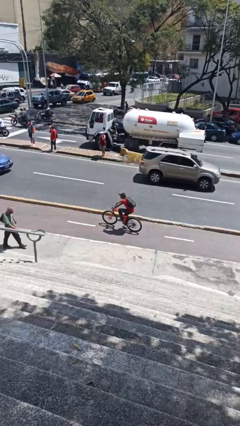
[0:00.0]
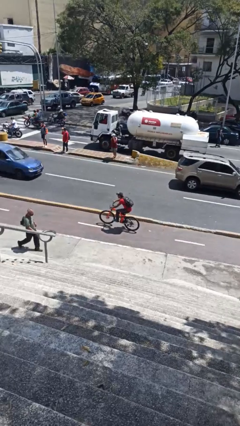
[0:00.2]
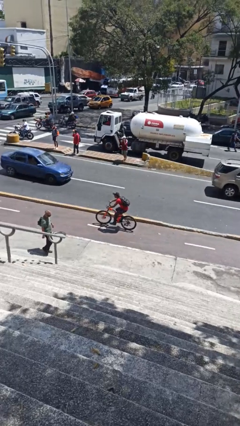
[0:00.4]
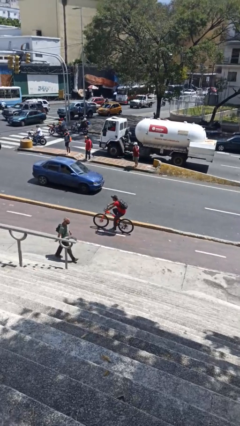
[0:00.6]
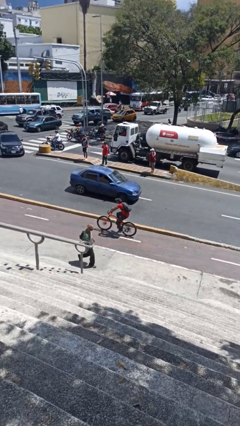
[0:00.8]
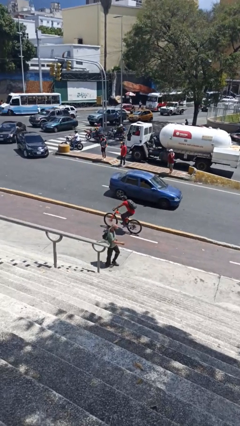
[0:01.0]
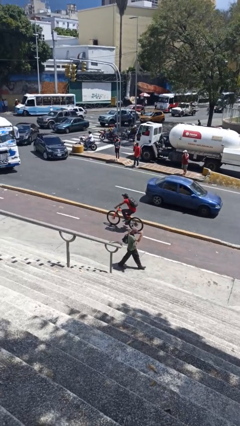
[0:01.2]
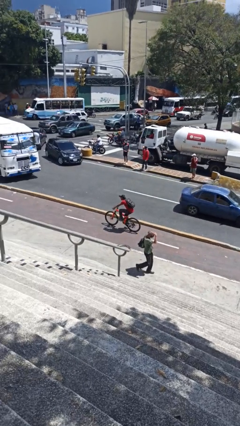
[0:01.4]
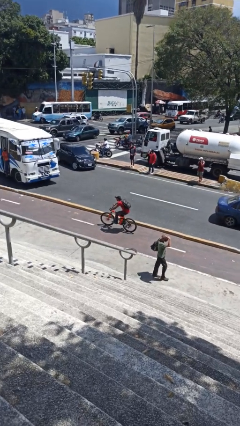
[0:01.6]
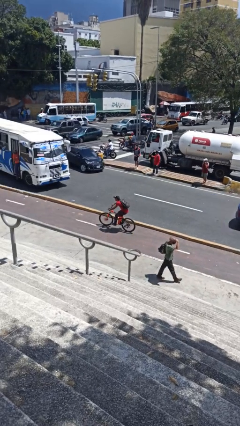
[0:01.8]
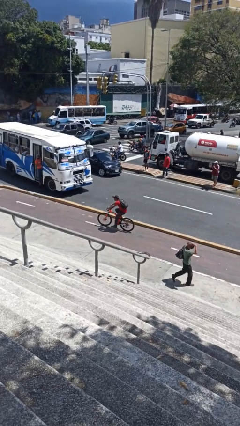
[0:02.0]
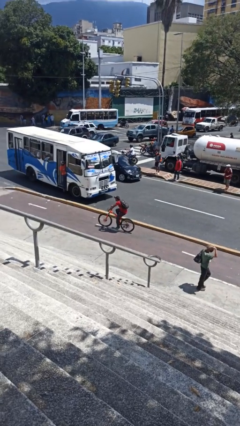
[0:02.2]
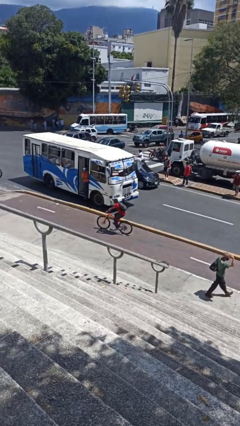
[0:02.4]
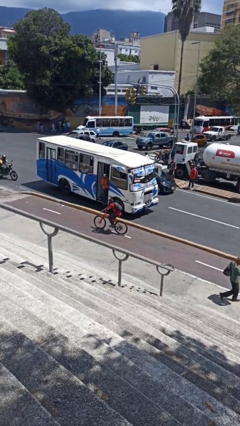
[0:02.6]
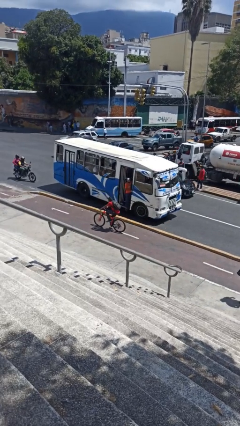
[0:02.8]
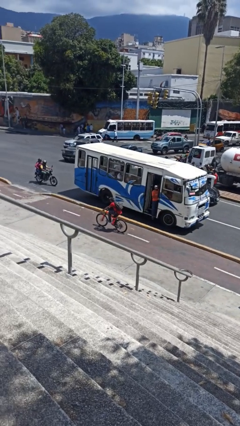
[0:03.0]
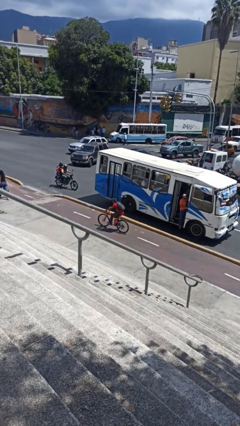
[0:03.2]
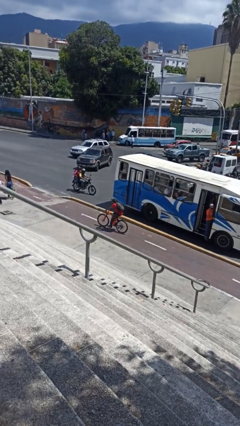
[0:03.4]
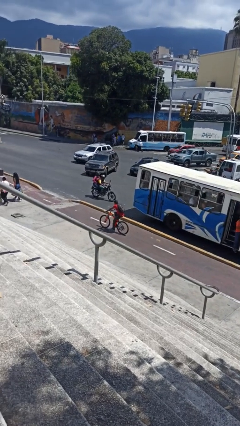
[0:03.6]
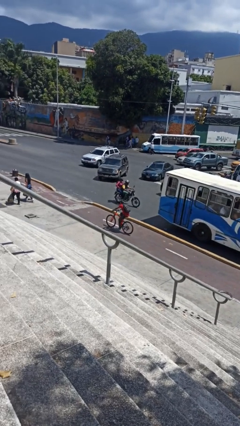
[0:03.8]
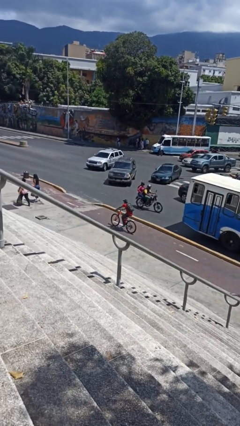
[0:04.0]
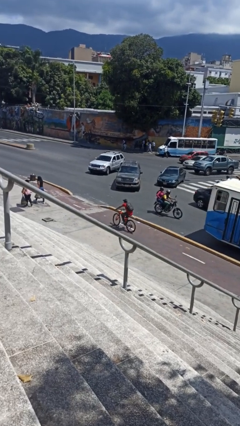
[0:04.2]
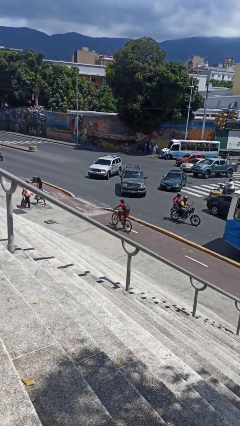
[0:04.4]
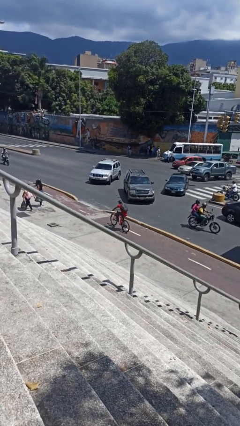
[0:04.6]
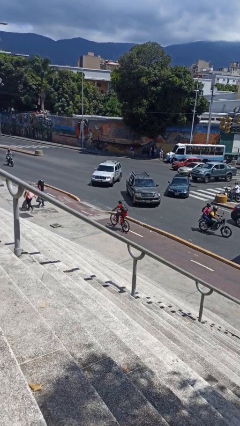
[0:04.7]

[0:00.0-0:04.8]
person rides bicycle

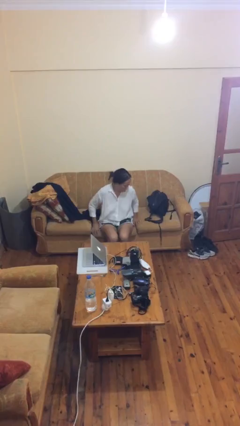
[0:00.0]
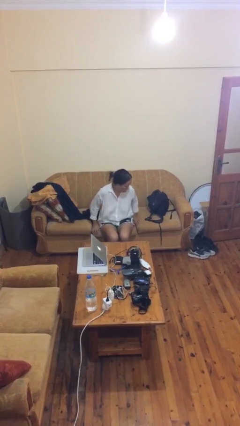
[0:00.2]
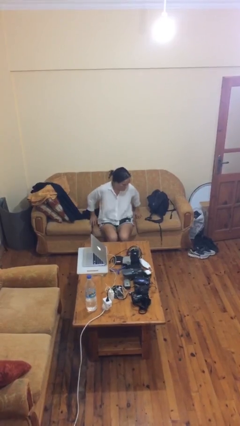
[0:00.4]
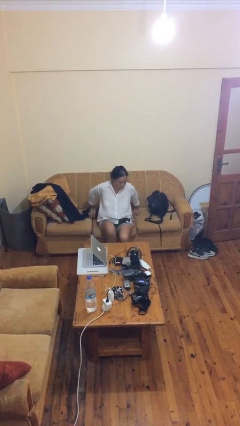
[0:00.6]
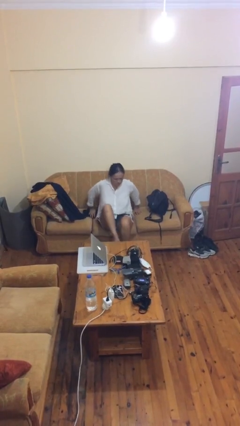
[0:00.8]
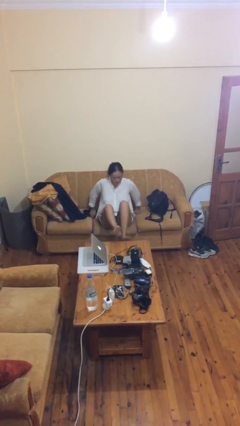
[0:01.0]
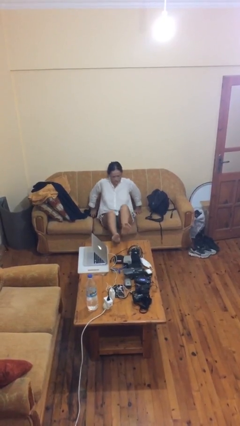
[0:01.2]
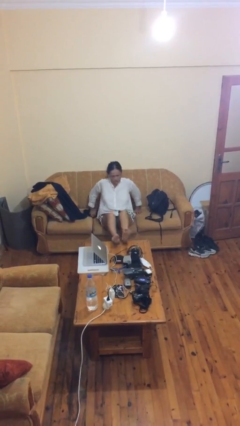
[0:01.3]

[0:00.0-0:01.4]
person puts feet up

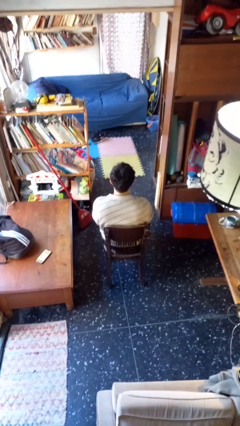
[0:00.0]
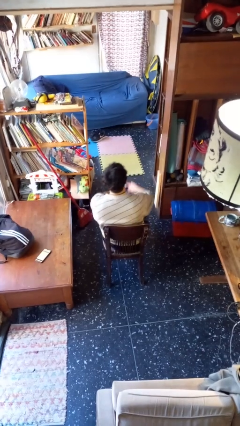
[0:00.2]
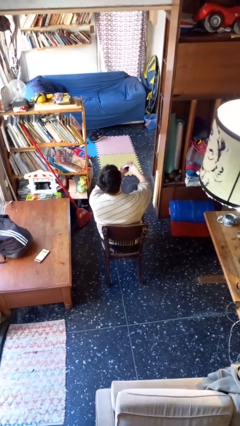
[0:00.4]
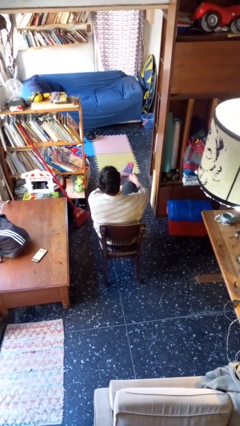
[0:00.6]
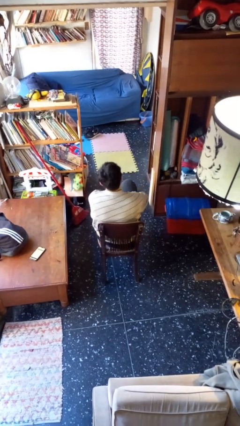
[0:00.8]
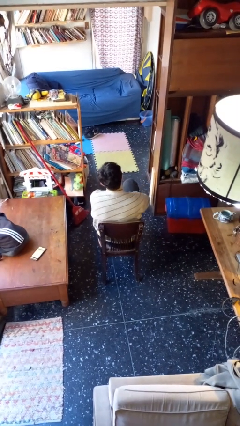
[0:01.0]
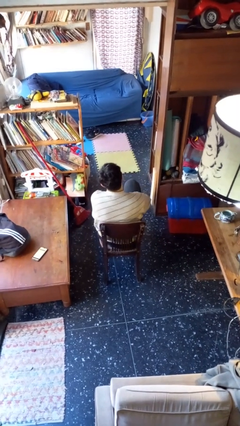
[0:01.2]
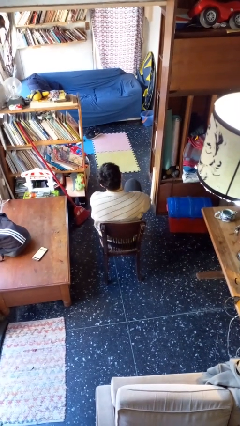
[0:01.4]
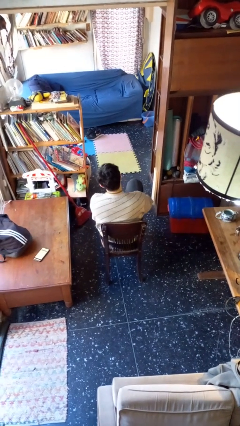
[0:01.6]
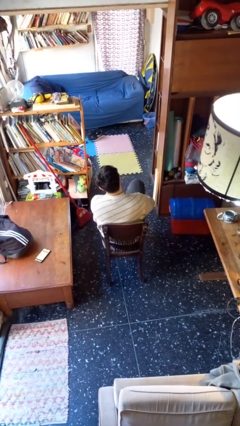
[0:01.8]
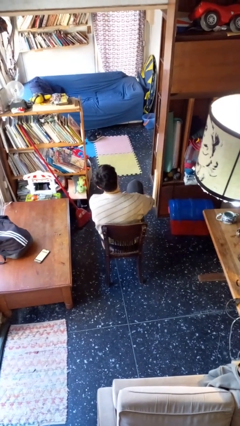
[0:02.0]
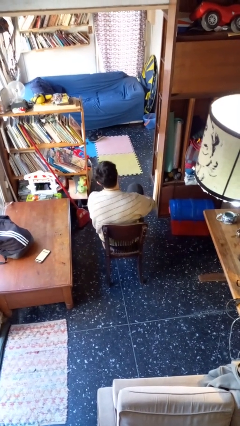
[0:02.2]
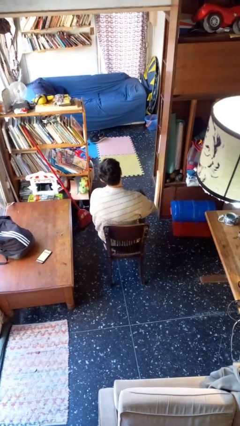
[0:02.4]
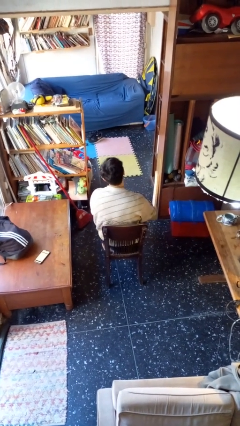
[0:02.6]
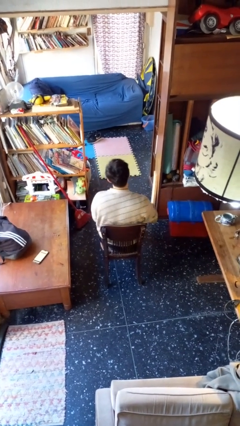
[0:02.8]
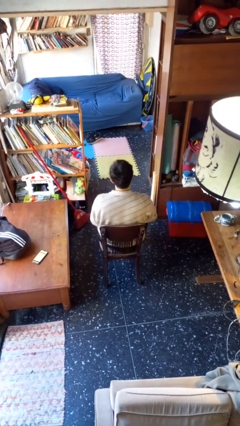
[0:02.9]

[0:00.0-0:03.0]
person puts on socks

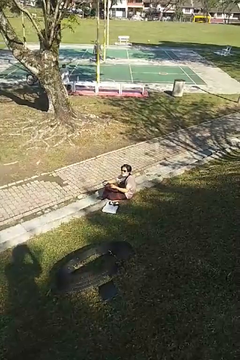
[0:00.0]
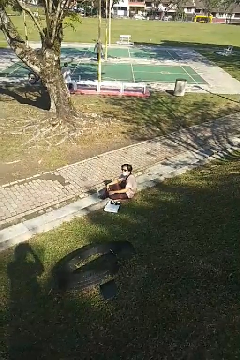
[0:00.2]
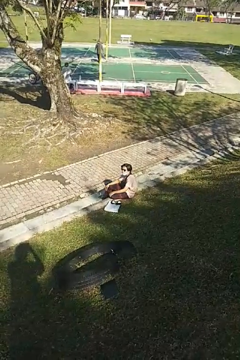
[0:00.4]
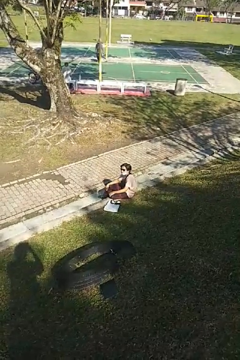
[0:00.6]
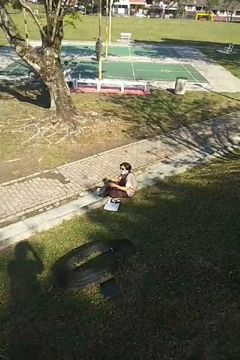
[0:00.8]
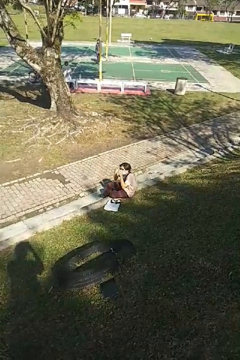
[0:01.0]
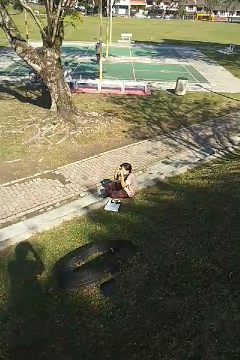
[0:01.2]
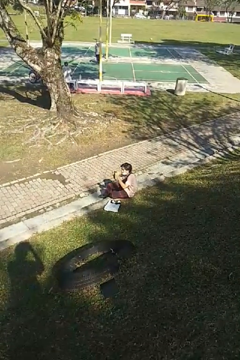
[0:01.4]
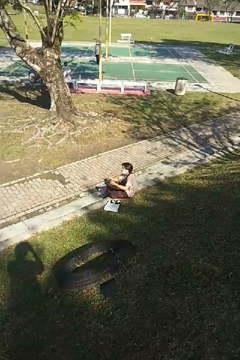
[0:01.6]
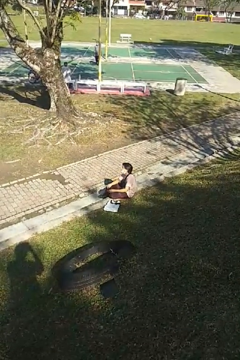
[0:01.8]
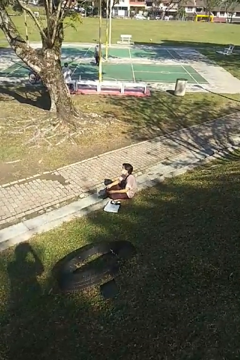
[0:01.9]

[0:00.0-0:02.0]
person takes off sunglasses

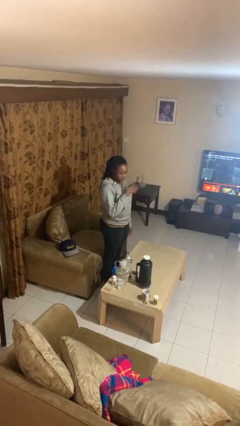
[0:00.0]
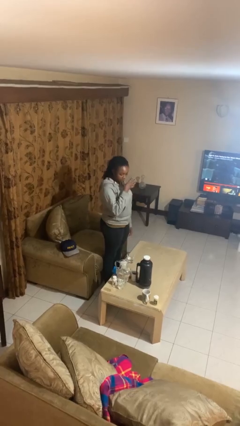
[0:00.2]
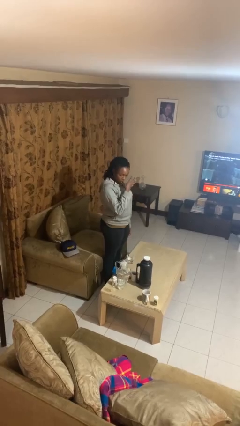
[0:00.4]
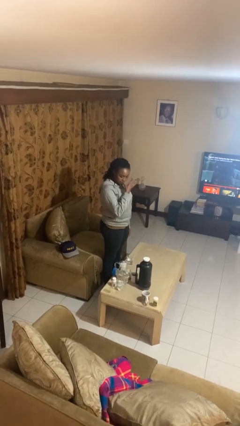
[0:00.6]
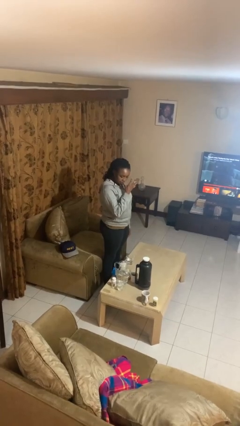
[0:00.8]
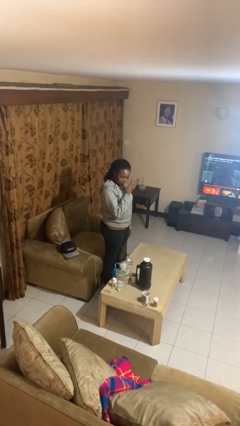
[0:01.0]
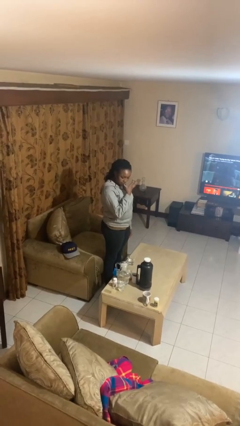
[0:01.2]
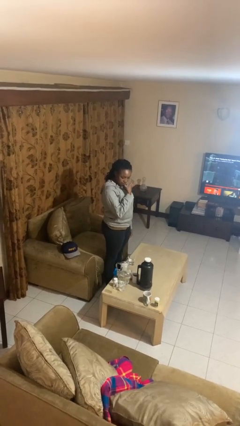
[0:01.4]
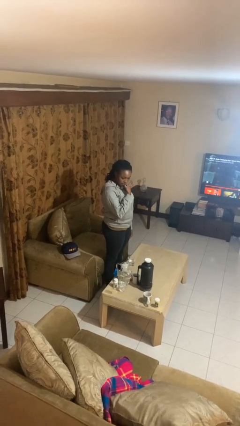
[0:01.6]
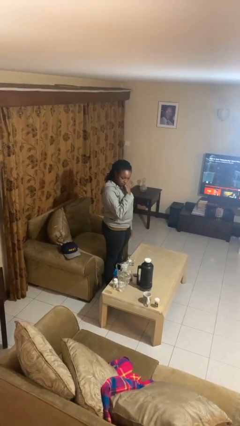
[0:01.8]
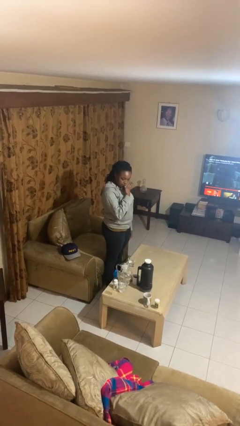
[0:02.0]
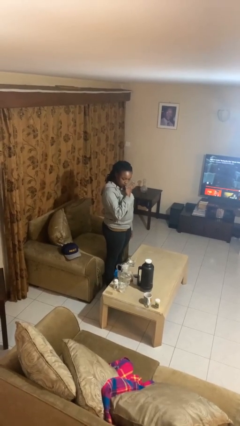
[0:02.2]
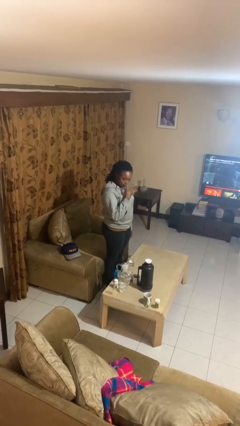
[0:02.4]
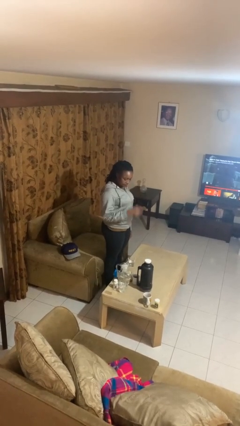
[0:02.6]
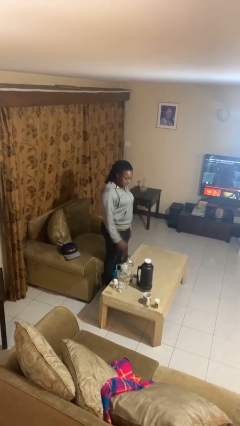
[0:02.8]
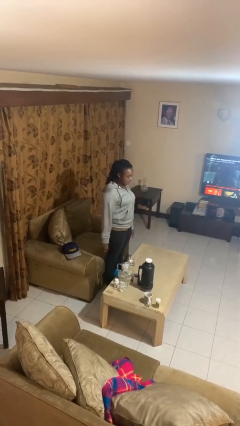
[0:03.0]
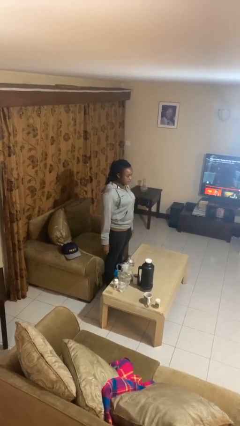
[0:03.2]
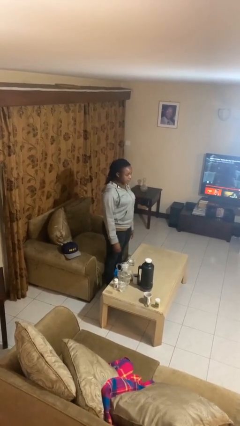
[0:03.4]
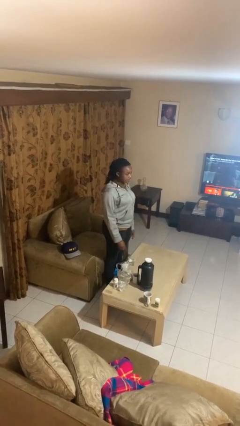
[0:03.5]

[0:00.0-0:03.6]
person licks fingers

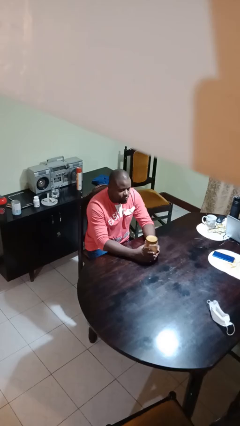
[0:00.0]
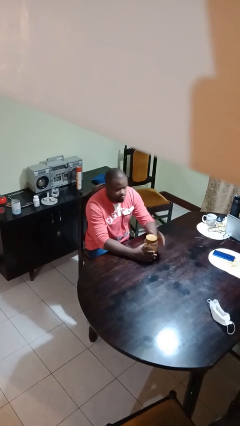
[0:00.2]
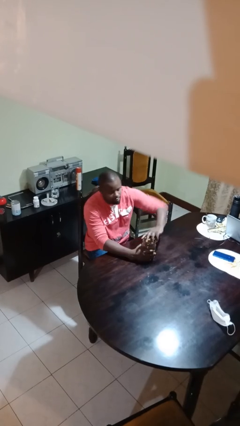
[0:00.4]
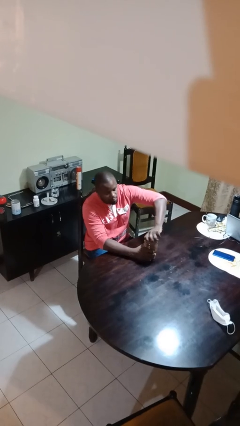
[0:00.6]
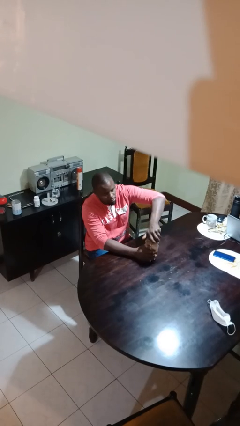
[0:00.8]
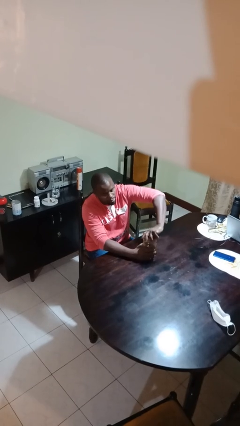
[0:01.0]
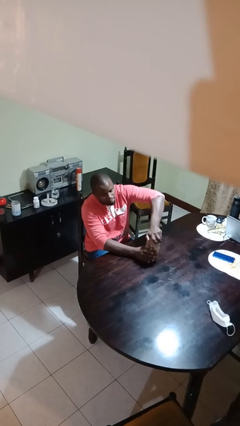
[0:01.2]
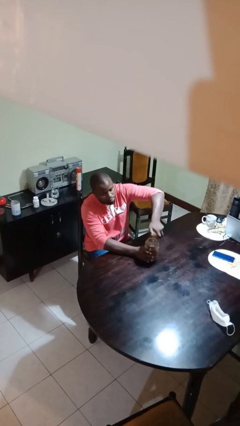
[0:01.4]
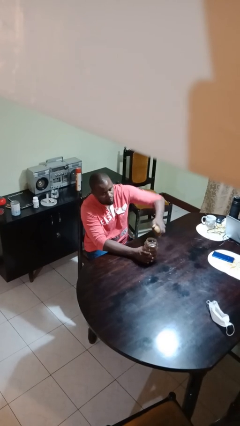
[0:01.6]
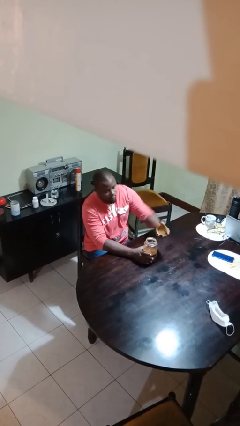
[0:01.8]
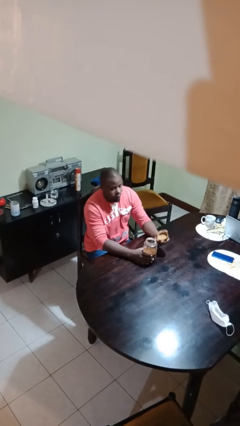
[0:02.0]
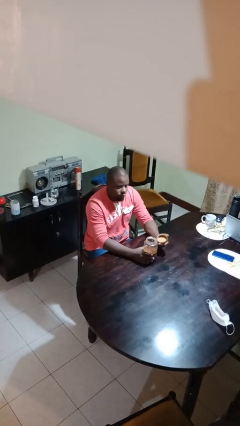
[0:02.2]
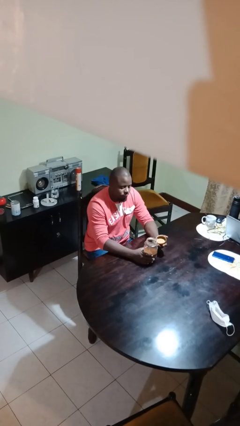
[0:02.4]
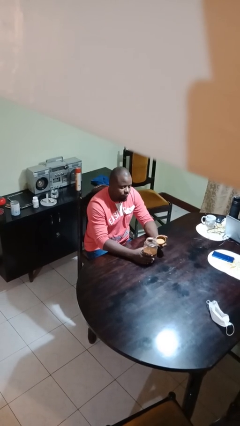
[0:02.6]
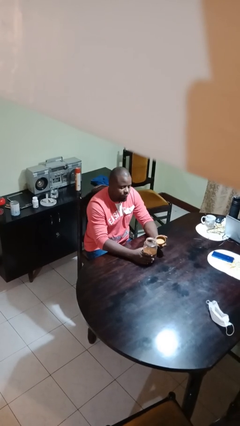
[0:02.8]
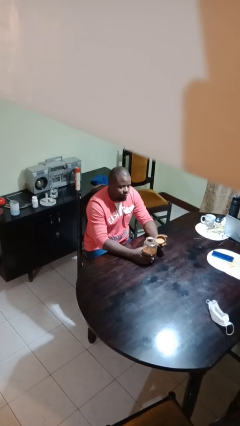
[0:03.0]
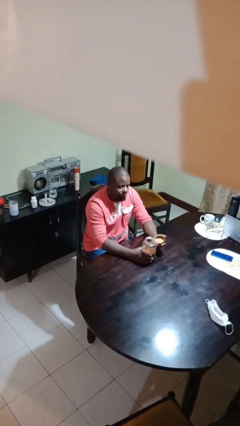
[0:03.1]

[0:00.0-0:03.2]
person opens jar
